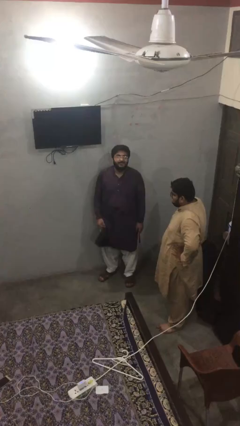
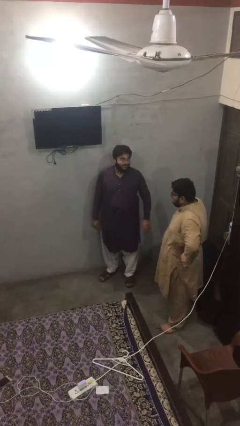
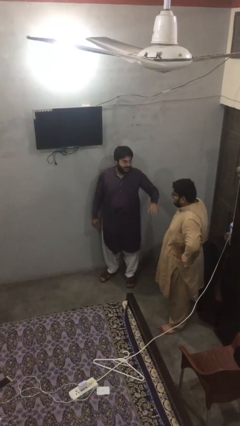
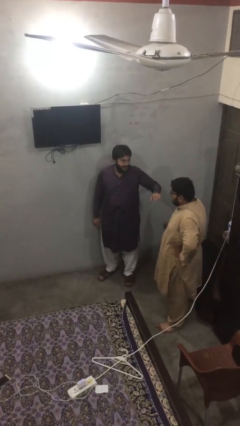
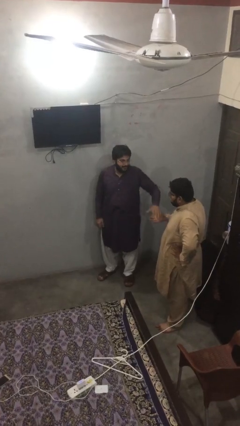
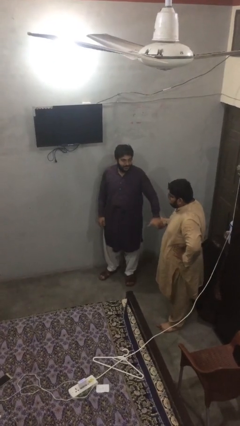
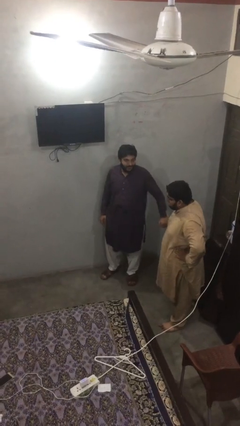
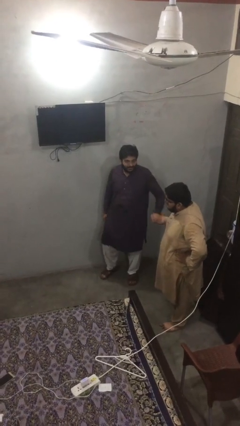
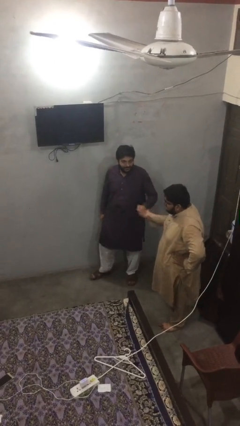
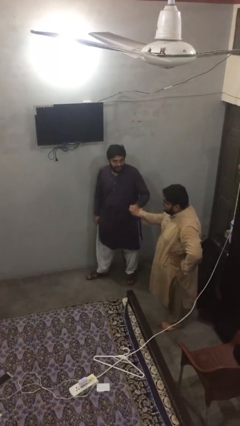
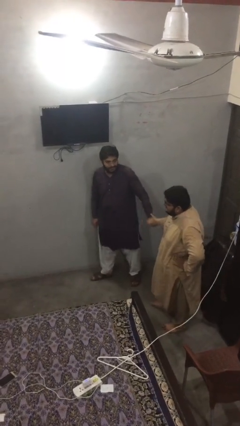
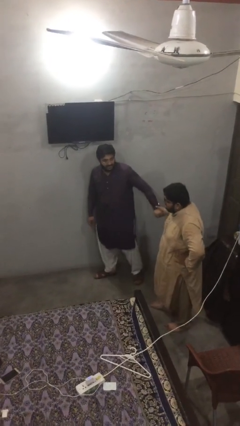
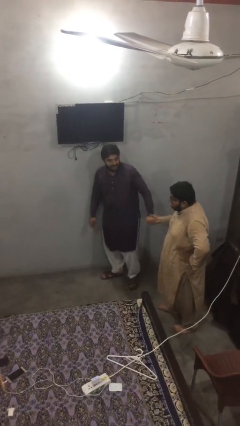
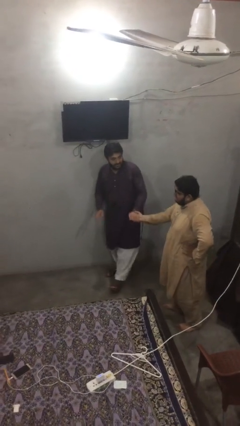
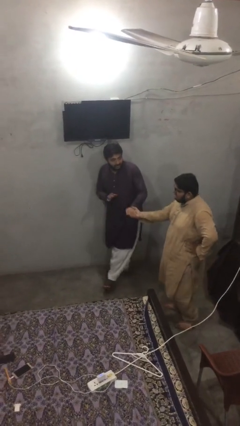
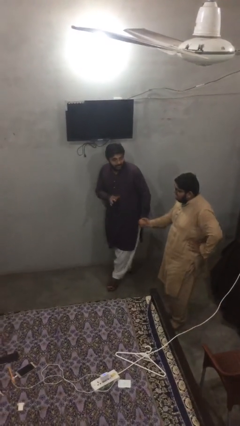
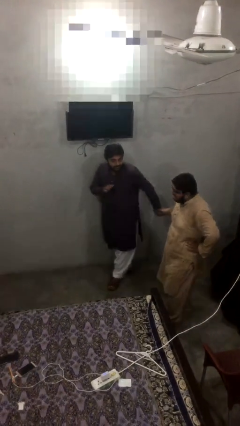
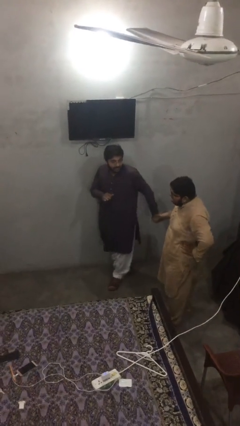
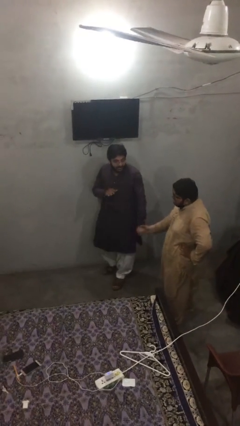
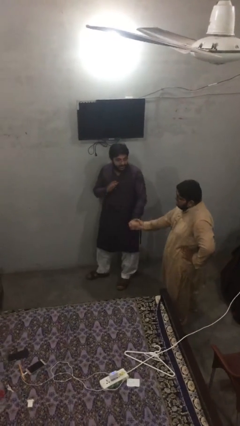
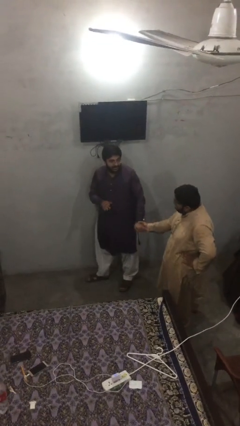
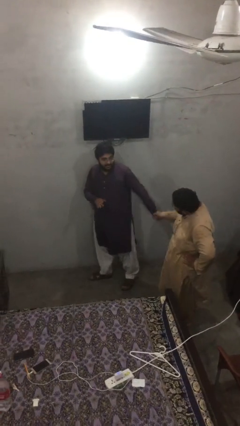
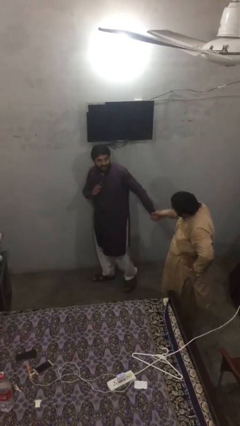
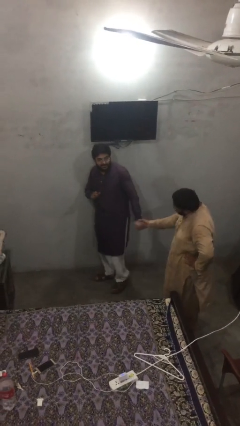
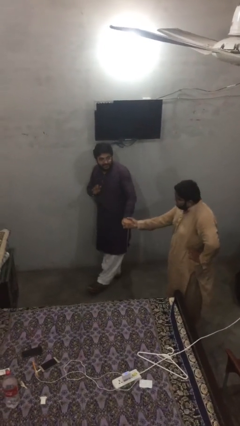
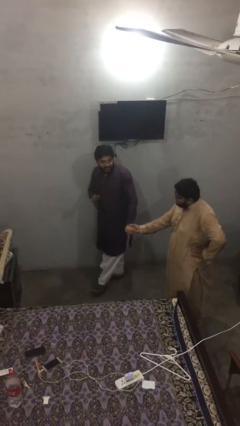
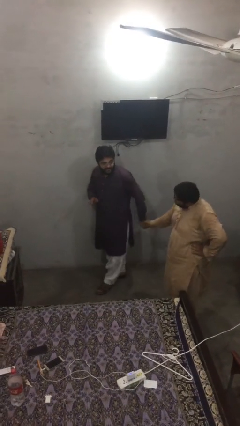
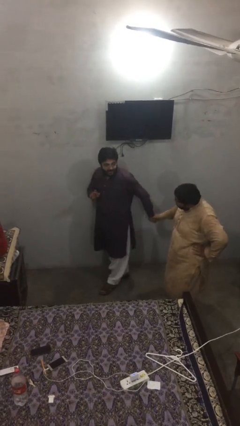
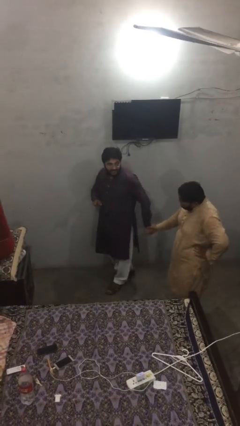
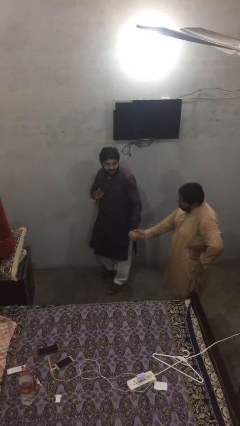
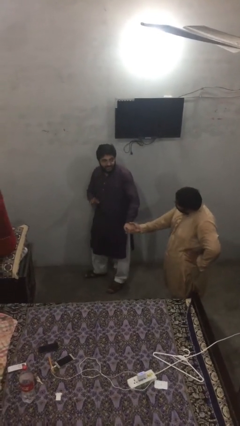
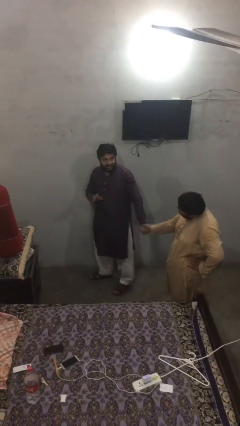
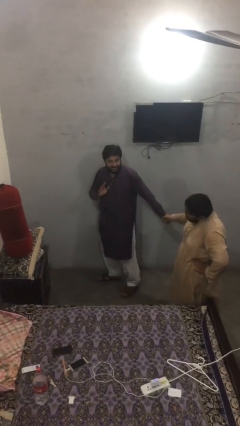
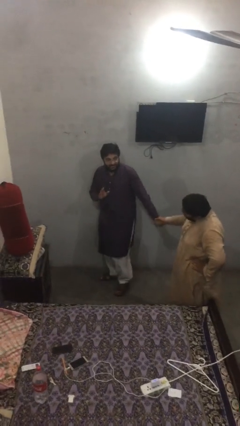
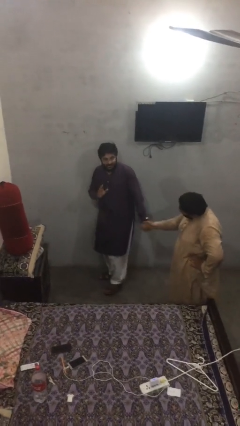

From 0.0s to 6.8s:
person holds hand

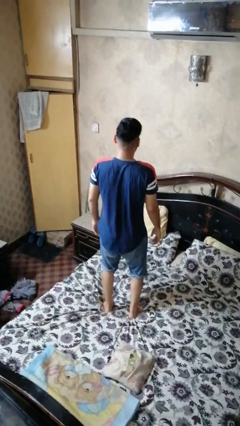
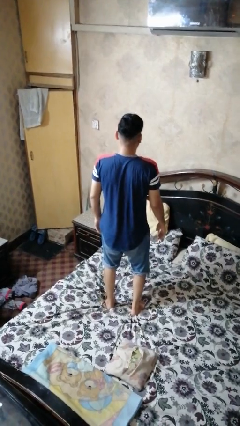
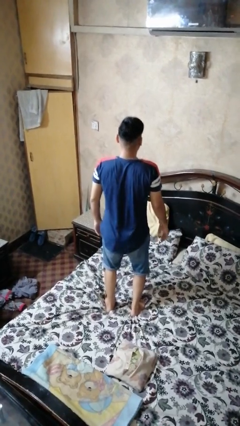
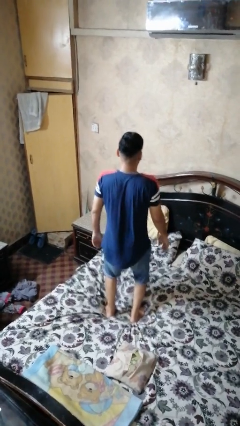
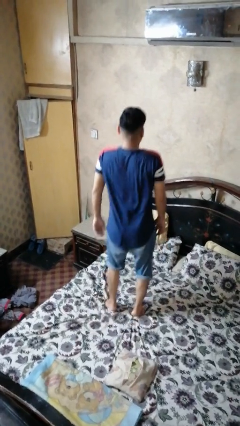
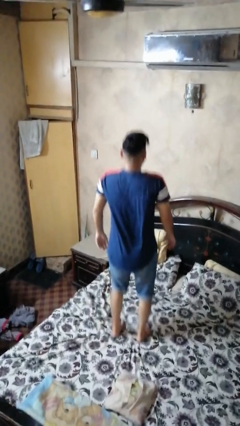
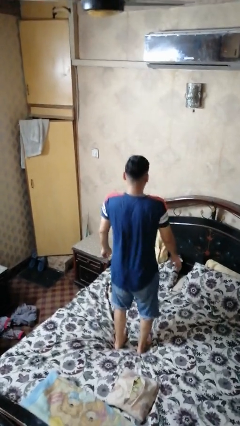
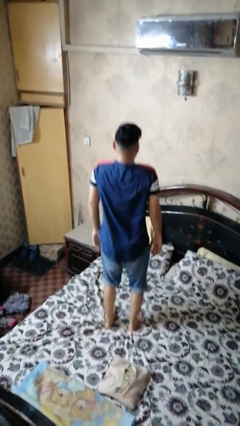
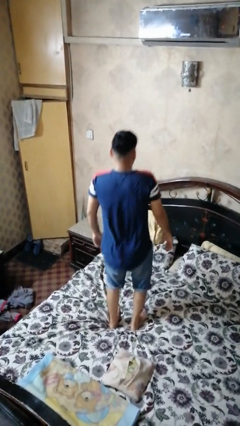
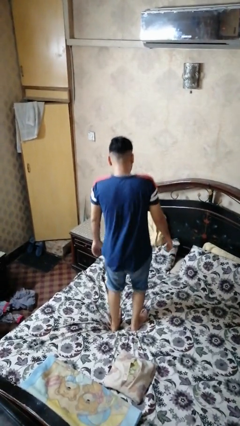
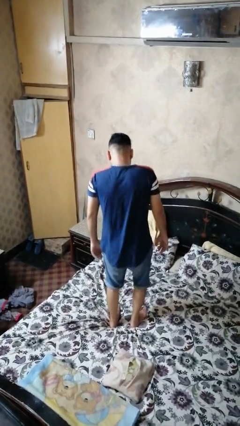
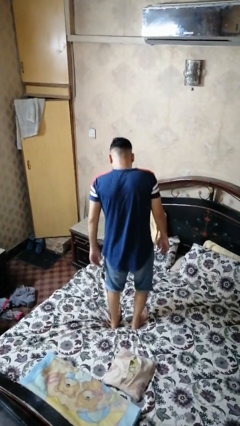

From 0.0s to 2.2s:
person jumps on bed

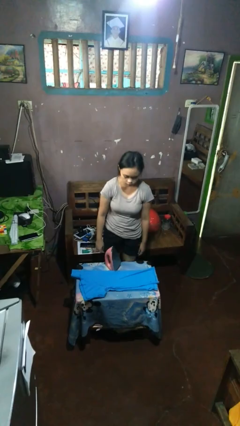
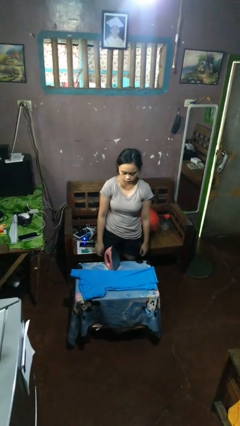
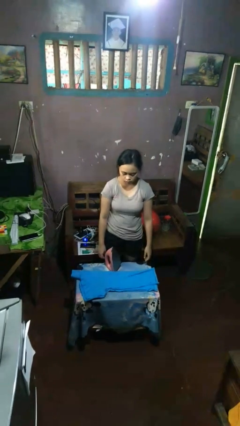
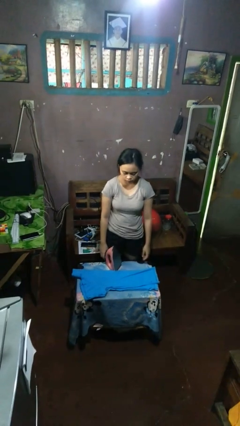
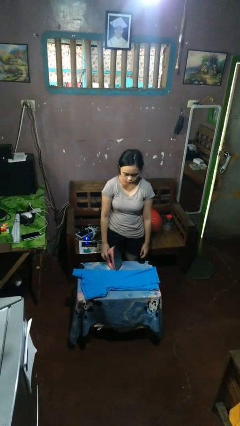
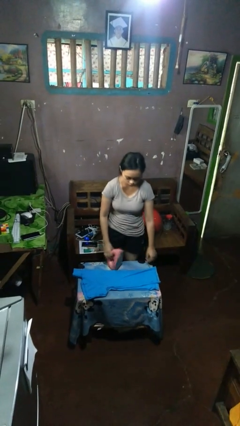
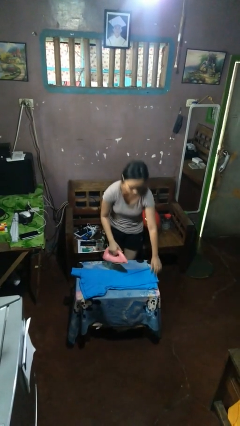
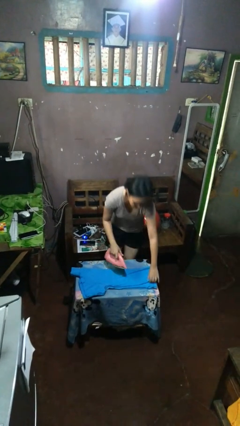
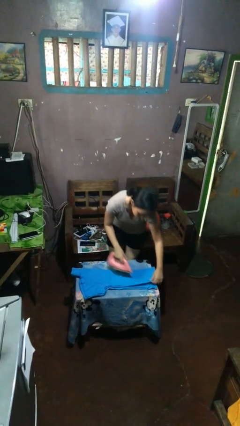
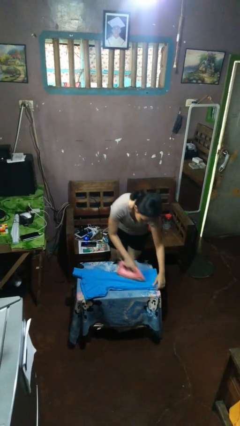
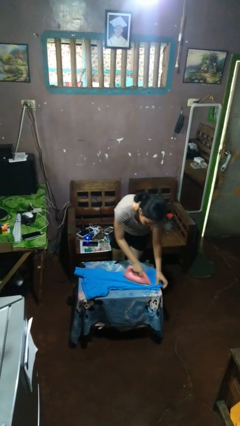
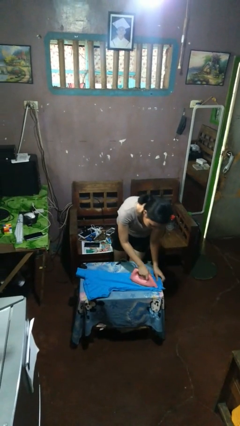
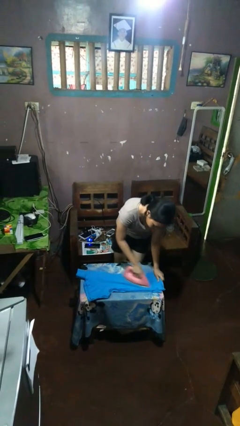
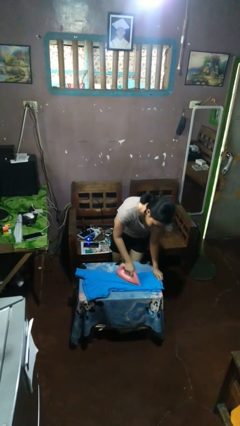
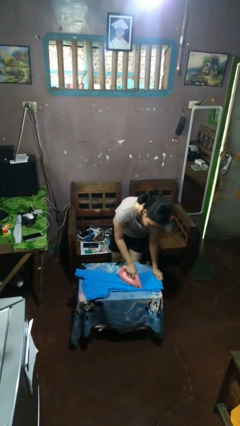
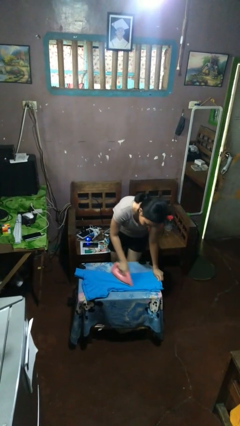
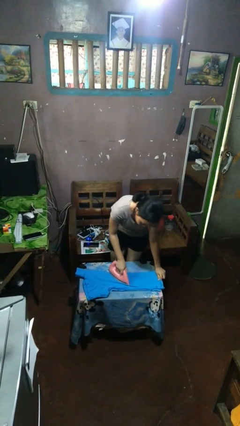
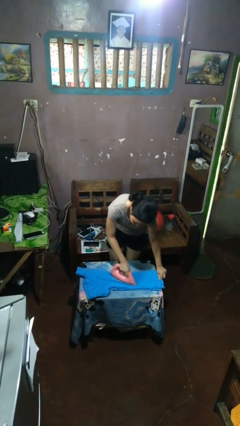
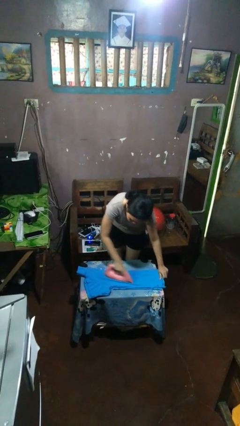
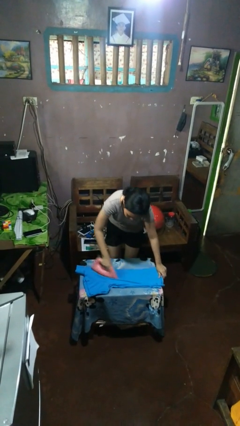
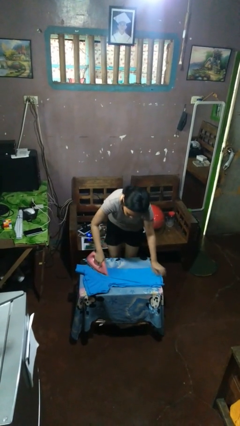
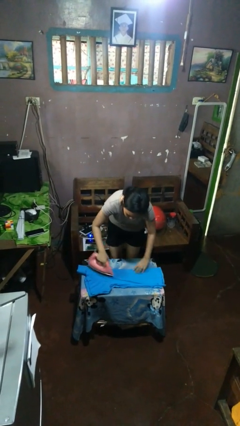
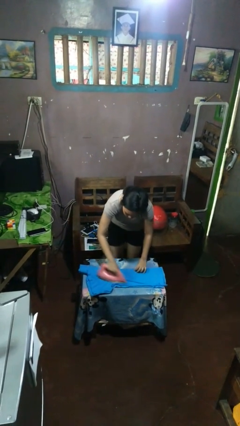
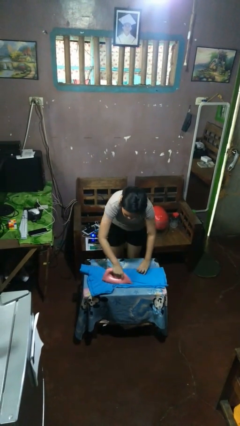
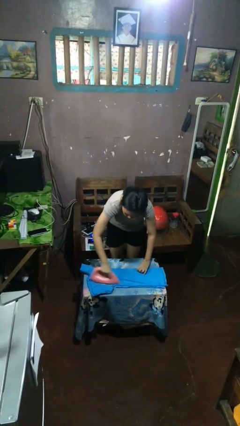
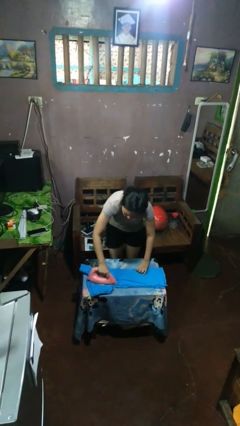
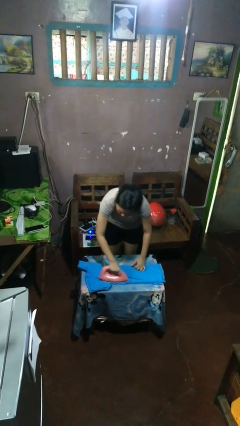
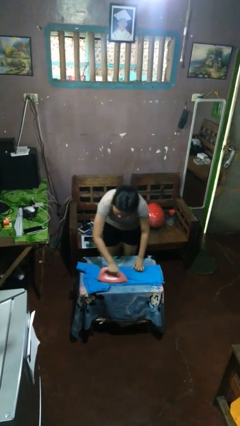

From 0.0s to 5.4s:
person irons clothes

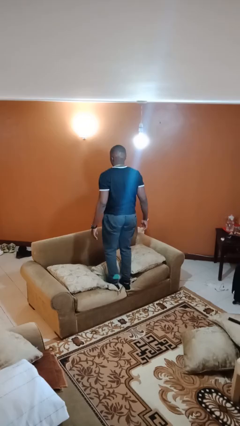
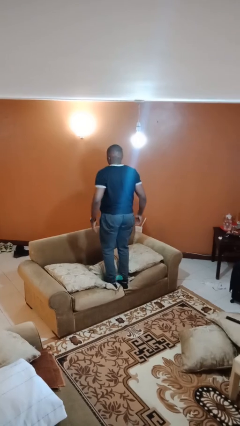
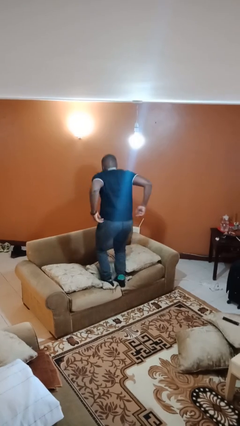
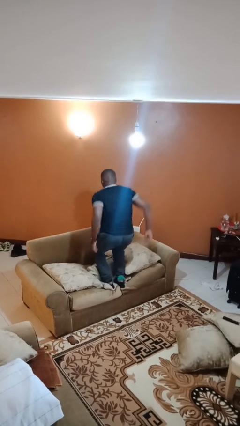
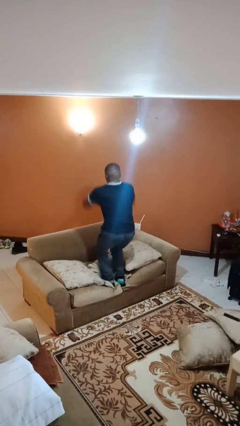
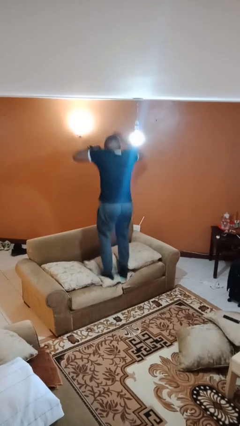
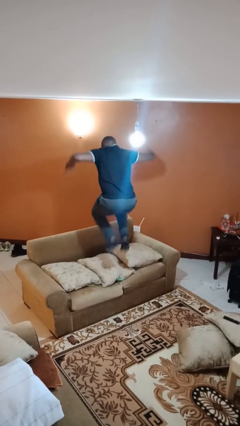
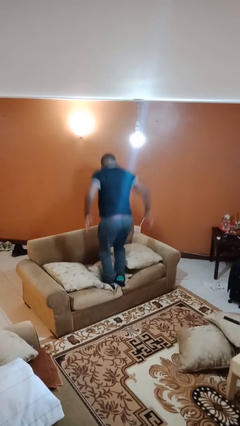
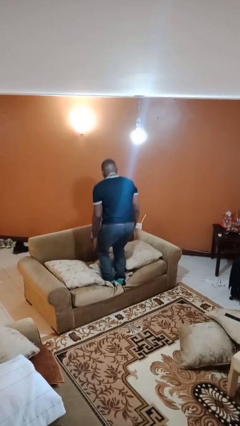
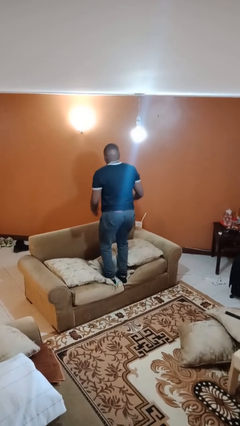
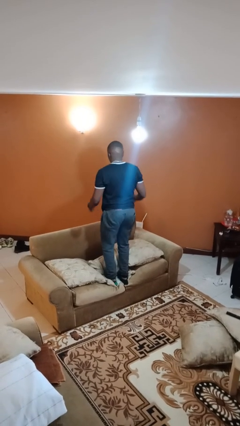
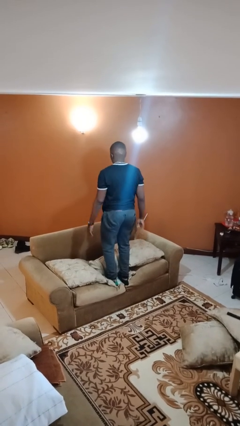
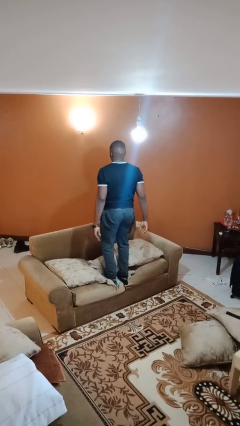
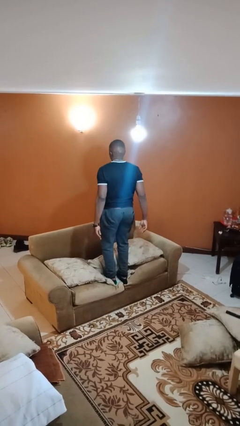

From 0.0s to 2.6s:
person jumps on couch

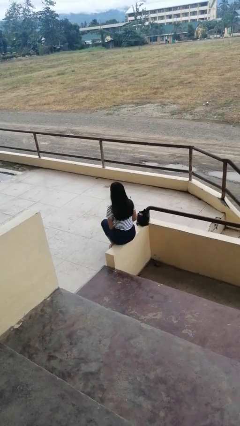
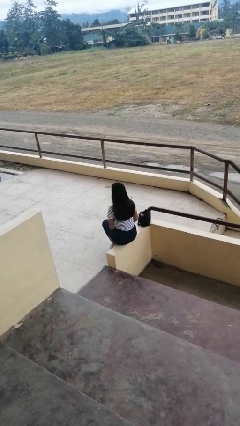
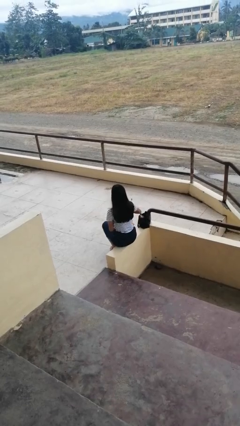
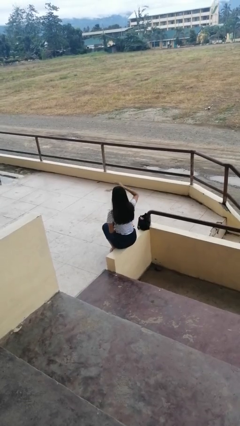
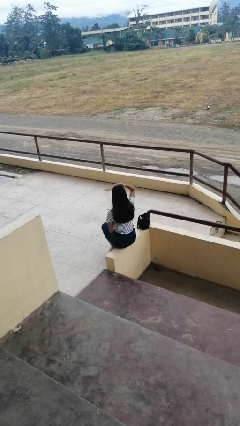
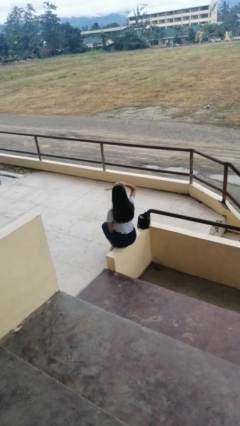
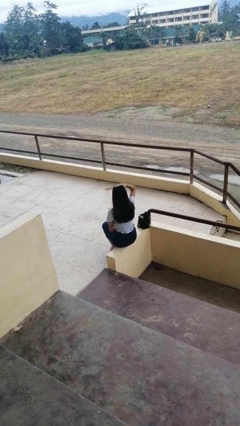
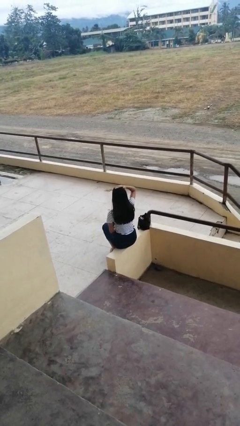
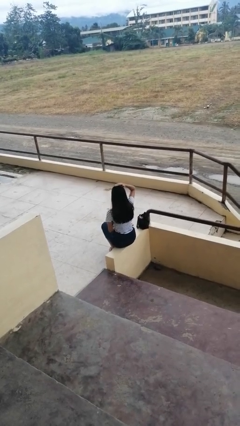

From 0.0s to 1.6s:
person pats head
